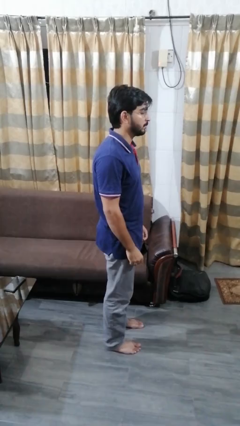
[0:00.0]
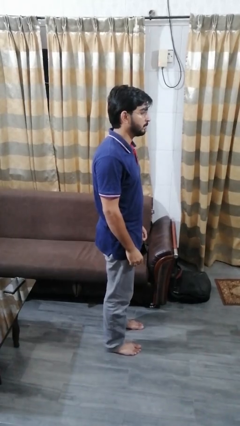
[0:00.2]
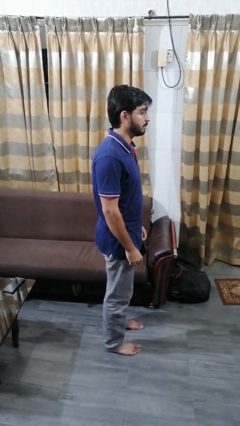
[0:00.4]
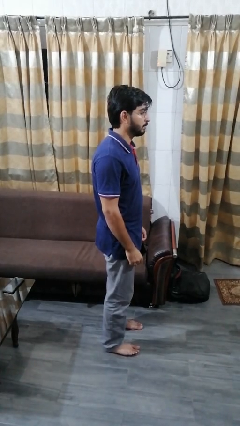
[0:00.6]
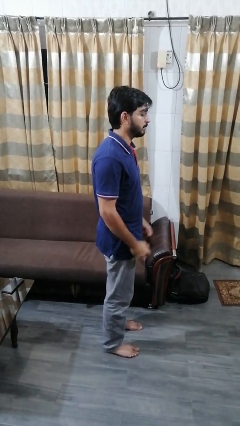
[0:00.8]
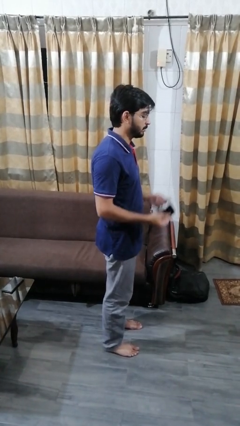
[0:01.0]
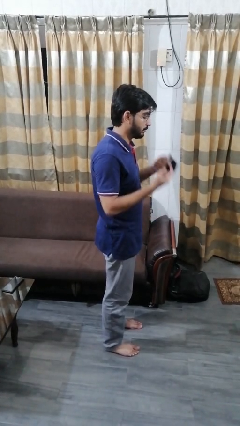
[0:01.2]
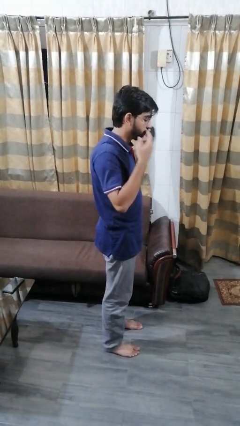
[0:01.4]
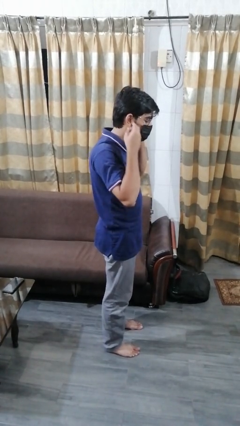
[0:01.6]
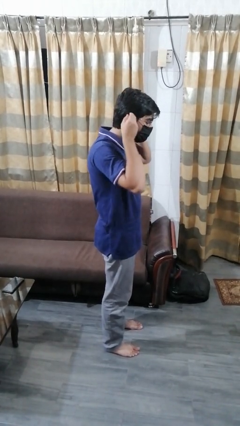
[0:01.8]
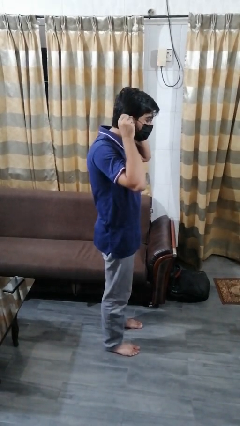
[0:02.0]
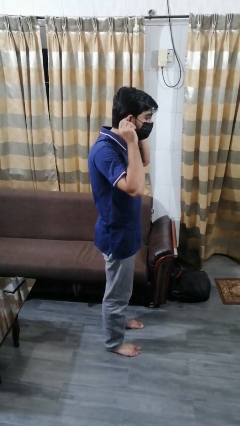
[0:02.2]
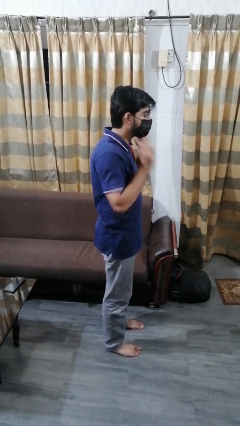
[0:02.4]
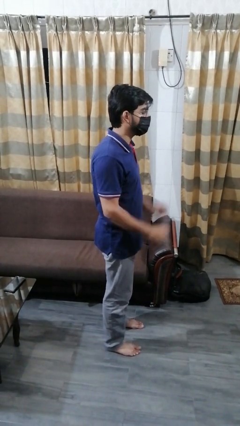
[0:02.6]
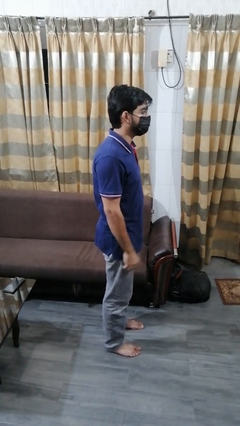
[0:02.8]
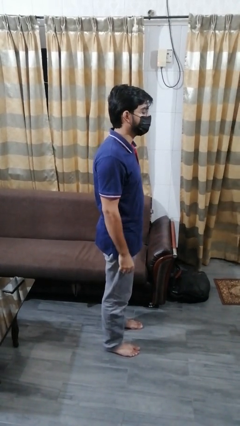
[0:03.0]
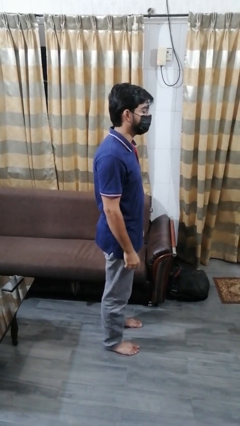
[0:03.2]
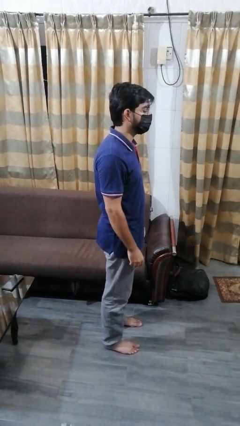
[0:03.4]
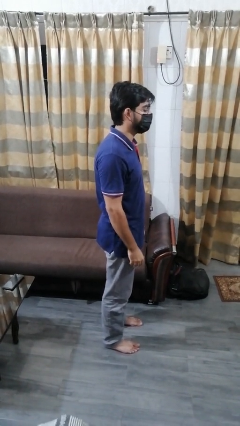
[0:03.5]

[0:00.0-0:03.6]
person puts on facemask

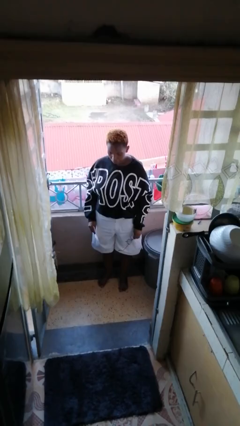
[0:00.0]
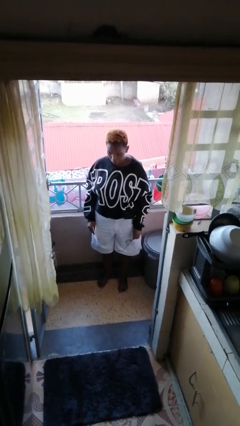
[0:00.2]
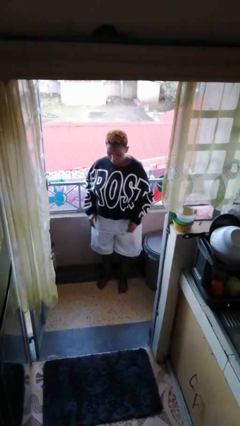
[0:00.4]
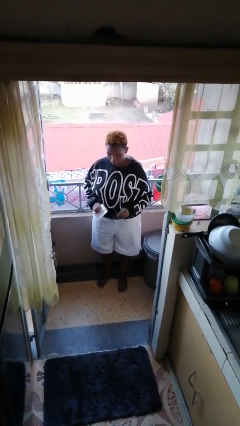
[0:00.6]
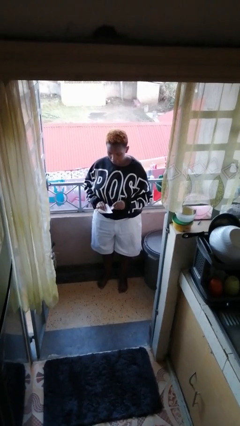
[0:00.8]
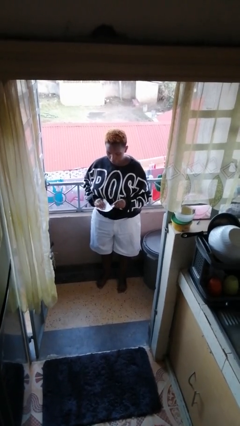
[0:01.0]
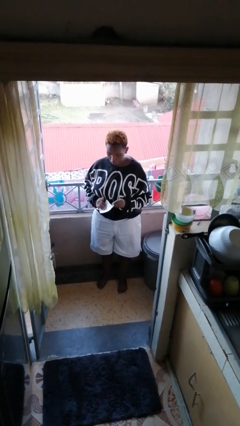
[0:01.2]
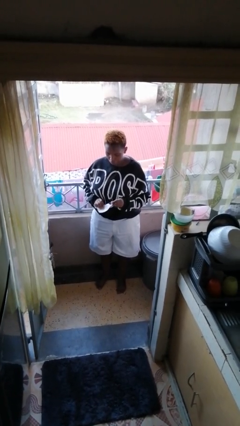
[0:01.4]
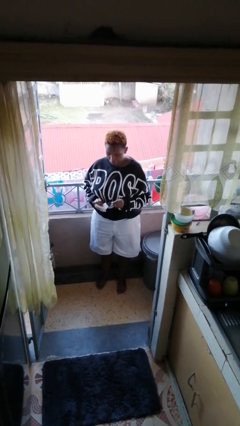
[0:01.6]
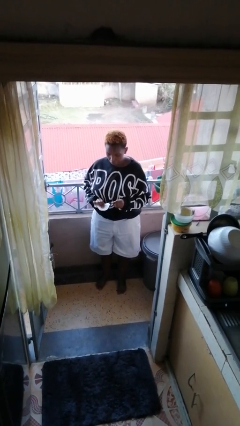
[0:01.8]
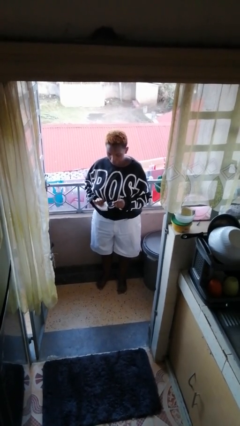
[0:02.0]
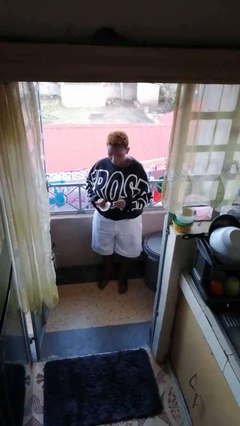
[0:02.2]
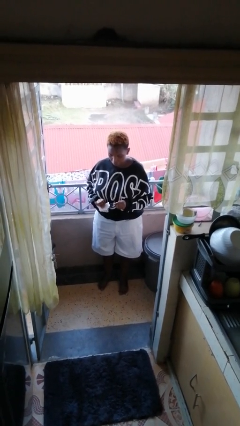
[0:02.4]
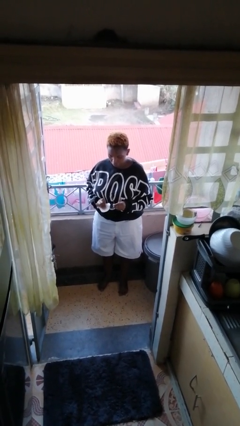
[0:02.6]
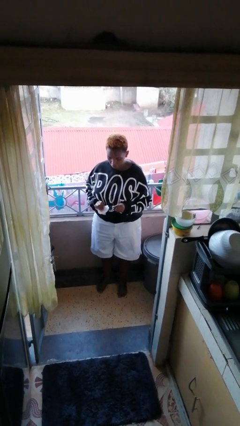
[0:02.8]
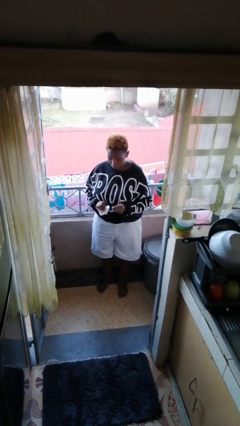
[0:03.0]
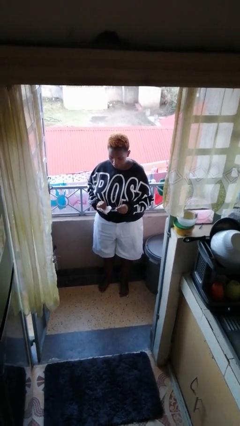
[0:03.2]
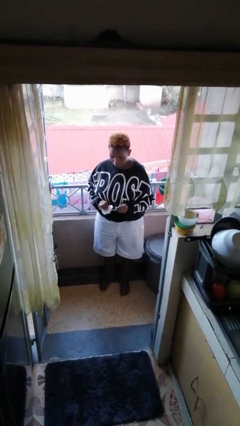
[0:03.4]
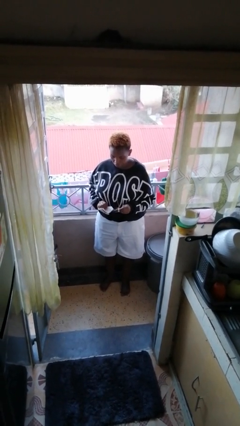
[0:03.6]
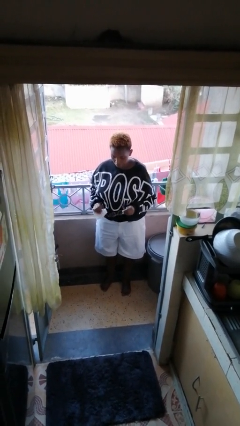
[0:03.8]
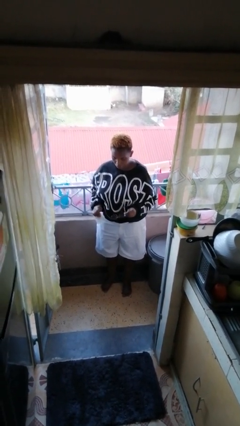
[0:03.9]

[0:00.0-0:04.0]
person cleans eyeglasses

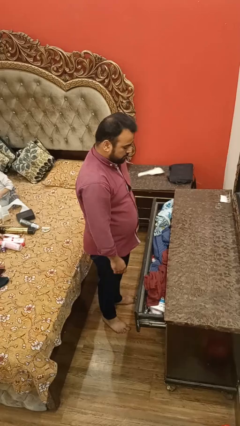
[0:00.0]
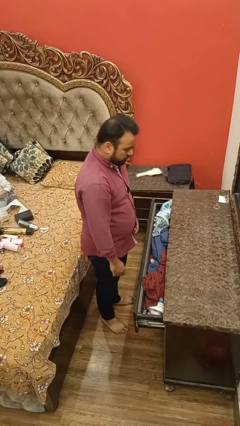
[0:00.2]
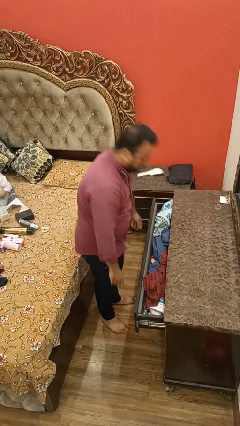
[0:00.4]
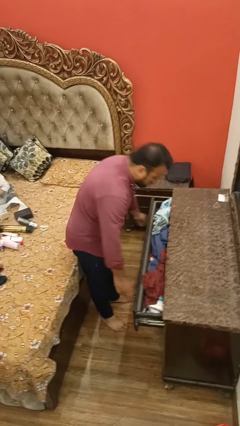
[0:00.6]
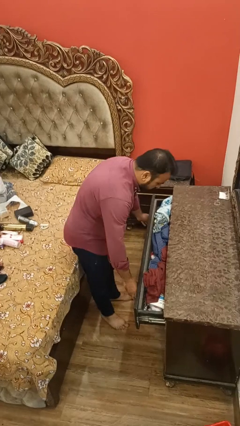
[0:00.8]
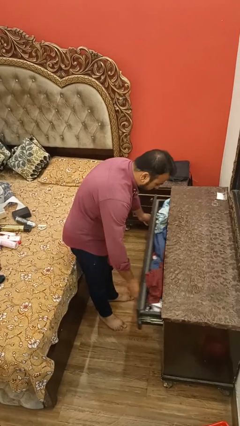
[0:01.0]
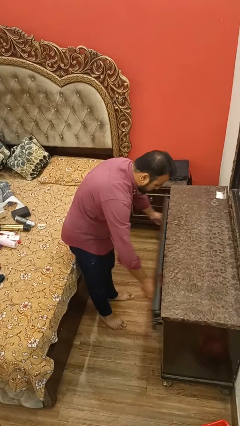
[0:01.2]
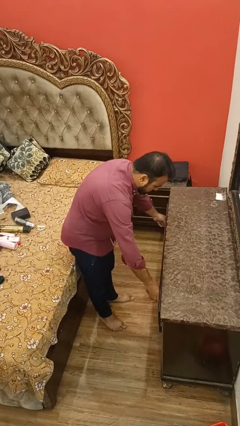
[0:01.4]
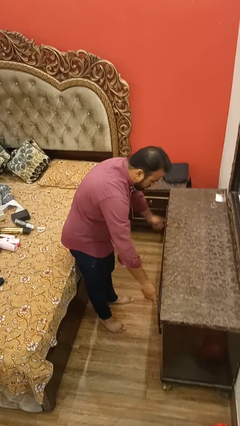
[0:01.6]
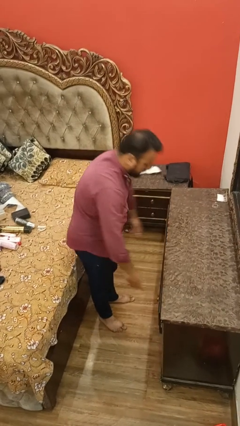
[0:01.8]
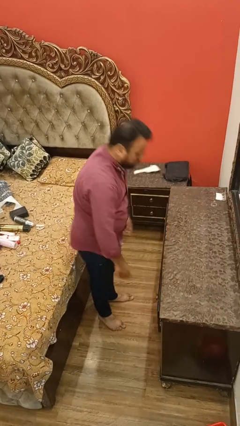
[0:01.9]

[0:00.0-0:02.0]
person closes dresser drawer

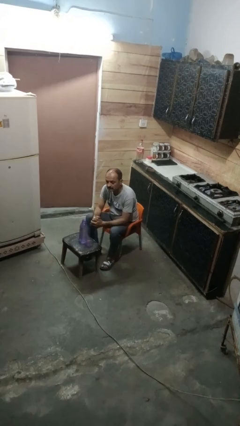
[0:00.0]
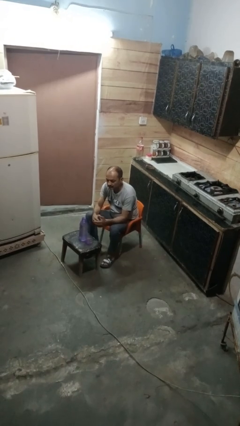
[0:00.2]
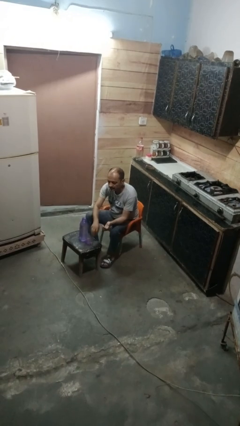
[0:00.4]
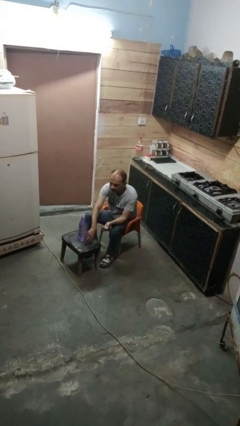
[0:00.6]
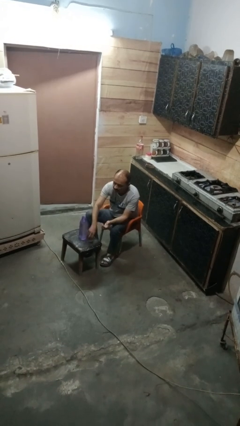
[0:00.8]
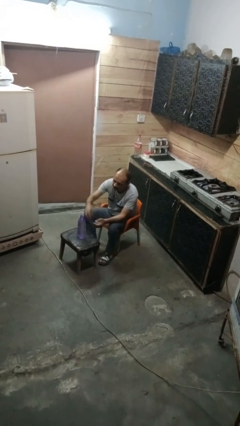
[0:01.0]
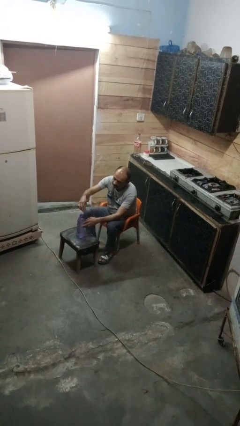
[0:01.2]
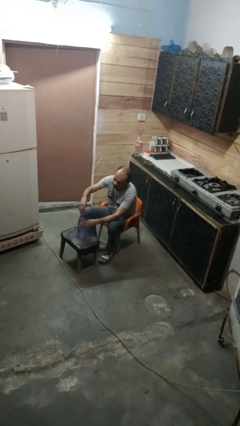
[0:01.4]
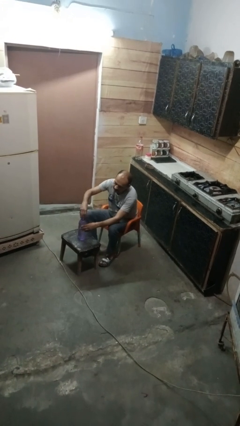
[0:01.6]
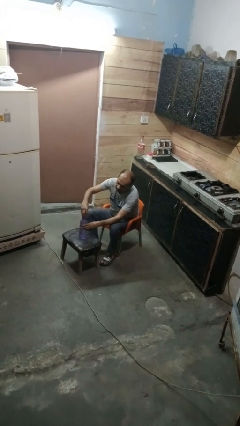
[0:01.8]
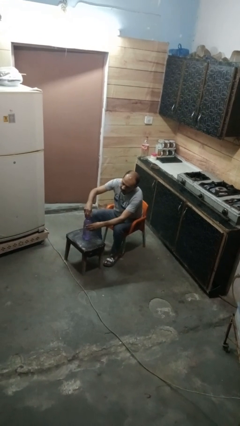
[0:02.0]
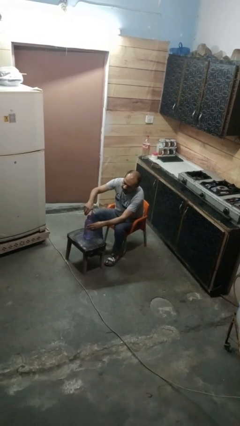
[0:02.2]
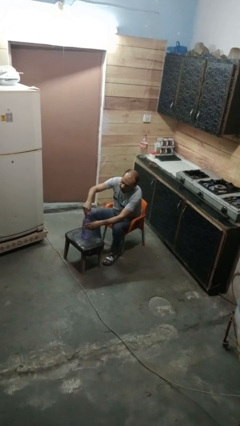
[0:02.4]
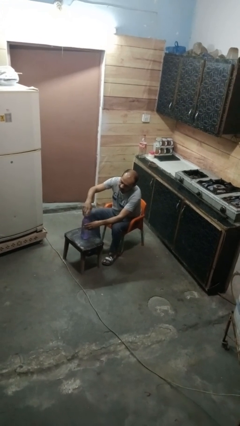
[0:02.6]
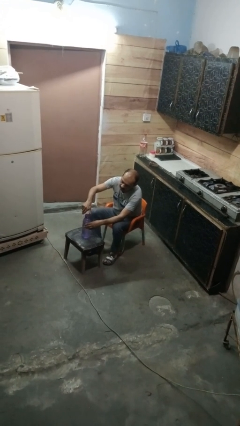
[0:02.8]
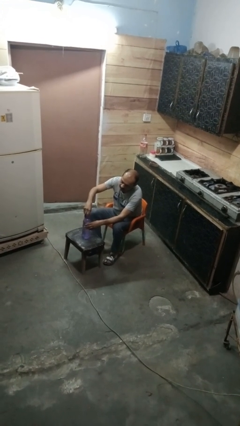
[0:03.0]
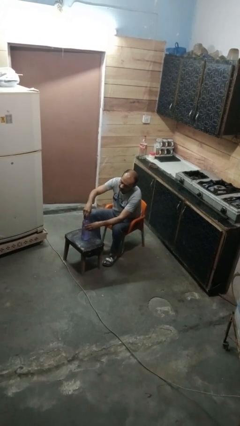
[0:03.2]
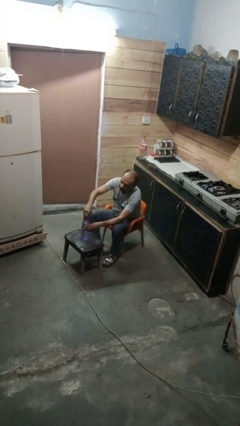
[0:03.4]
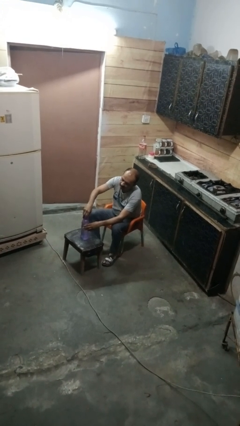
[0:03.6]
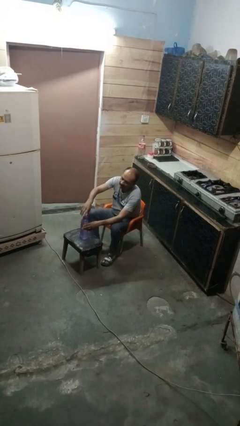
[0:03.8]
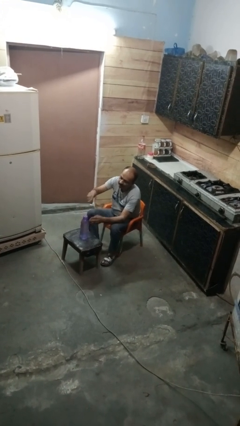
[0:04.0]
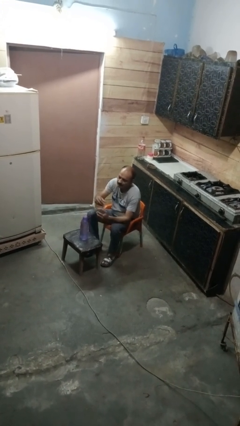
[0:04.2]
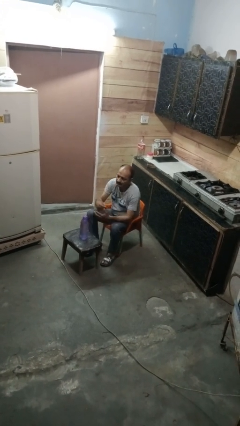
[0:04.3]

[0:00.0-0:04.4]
person screws lid to bottle

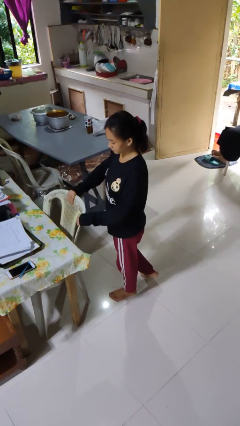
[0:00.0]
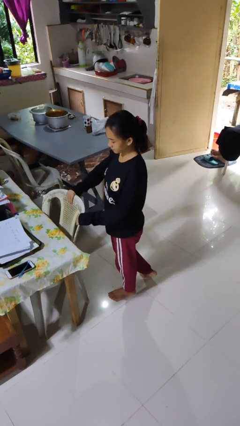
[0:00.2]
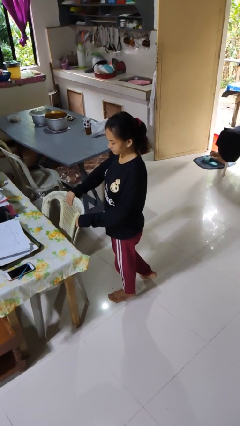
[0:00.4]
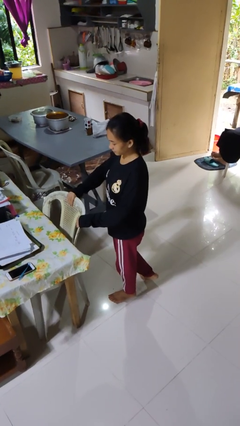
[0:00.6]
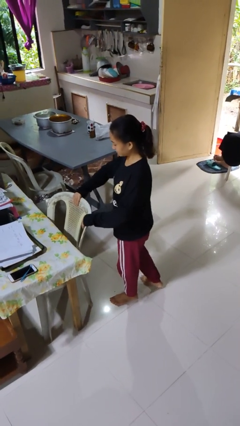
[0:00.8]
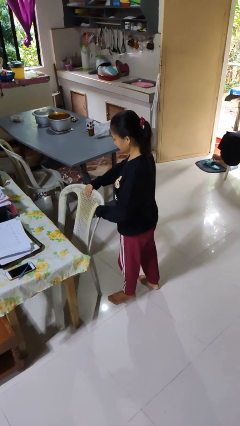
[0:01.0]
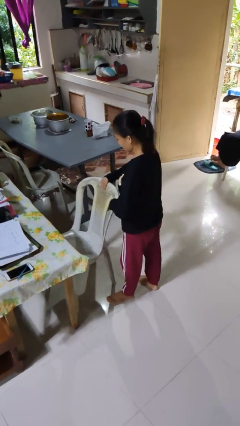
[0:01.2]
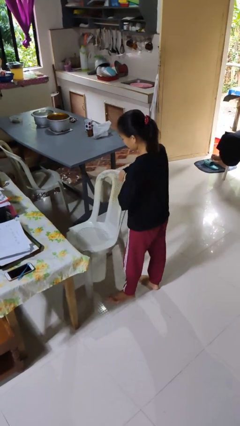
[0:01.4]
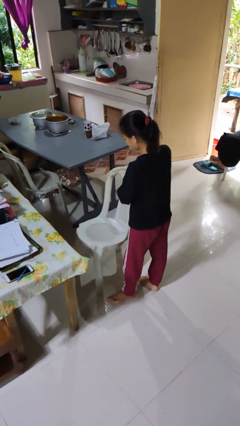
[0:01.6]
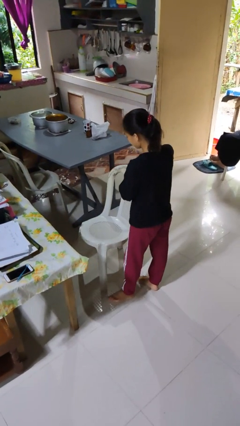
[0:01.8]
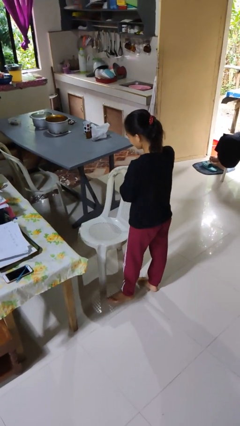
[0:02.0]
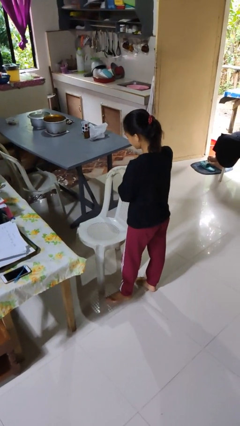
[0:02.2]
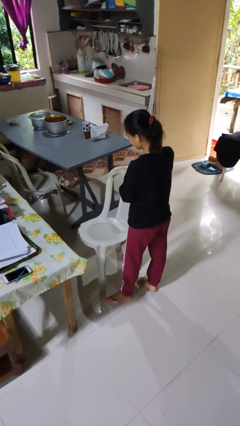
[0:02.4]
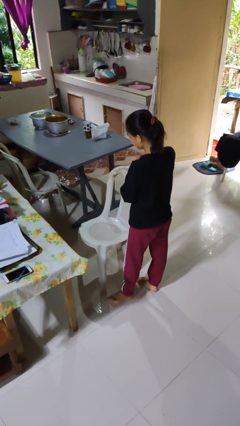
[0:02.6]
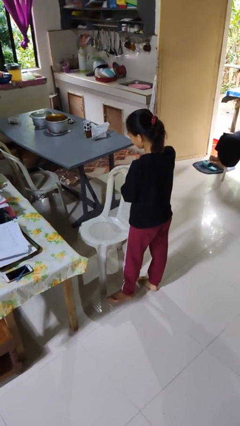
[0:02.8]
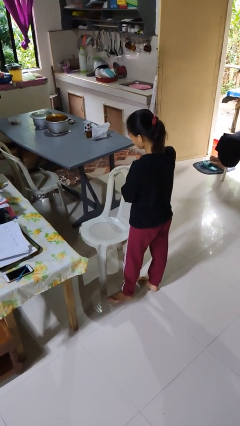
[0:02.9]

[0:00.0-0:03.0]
person pulls out chair

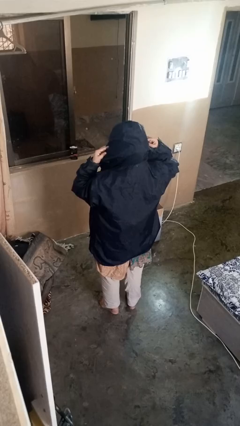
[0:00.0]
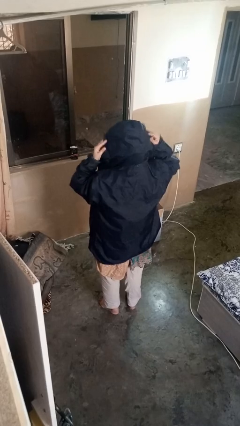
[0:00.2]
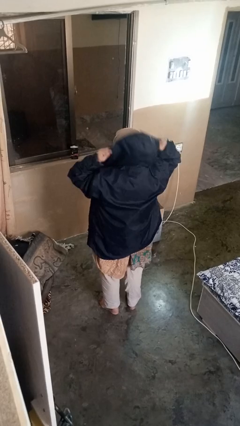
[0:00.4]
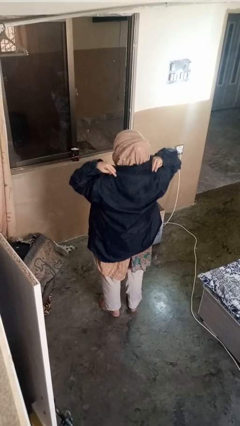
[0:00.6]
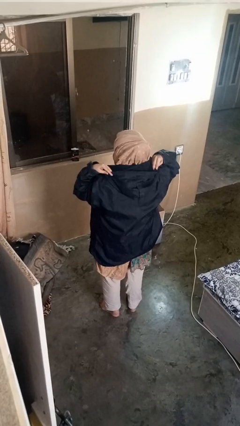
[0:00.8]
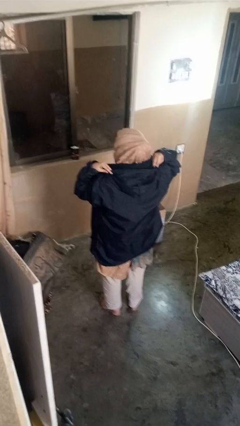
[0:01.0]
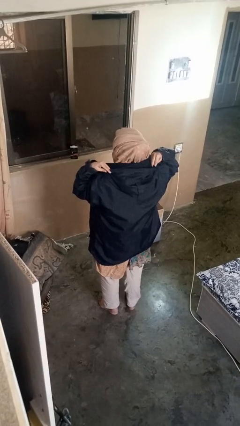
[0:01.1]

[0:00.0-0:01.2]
person takes off hat
